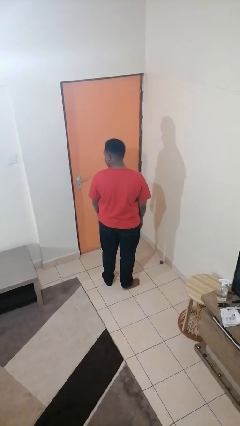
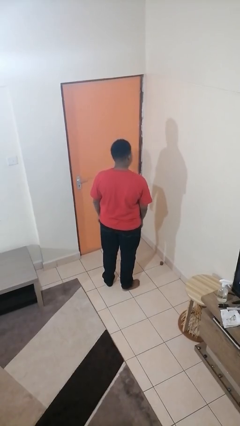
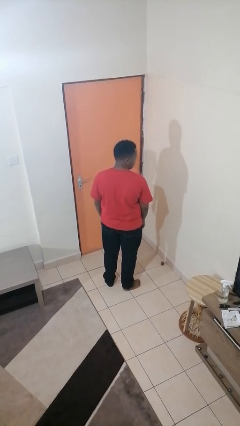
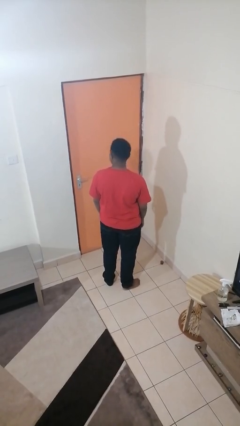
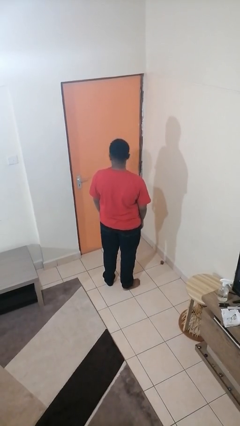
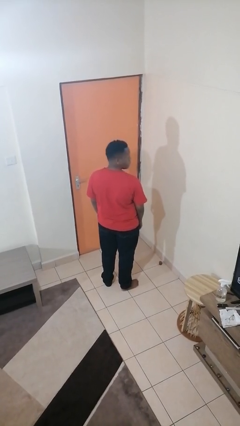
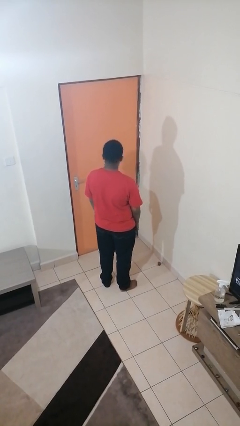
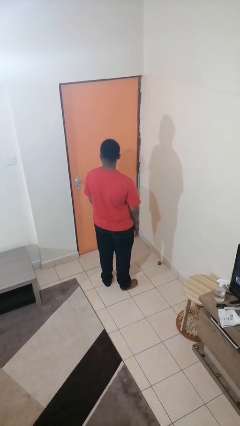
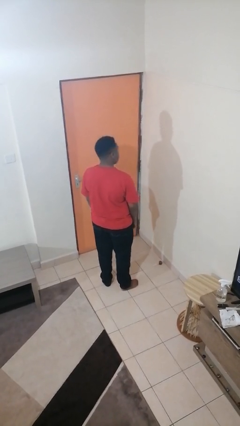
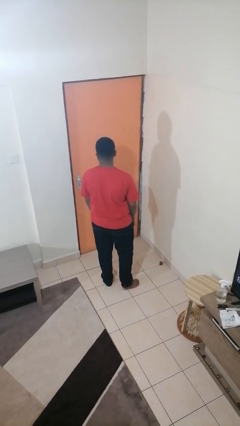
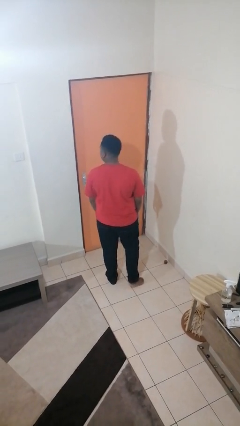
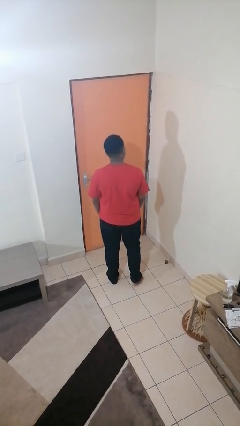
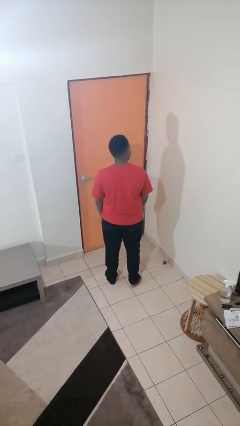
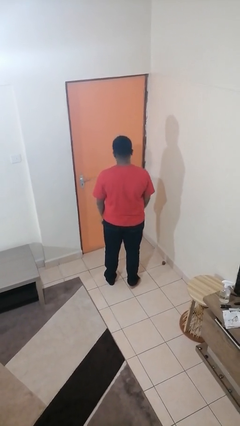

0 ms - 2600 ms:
person shakes head

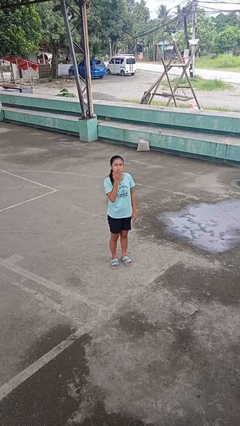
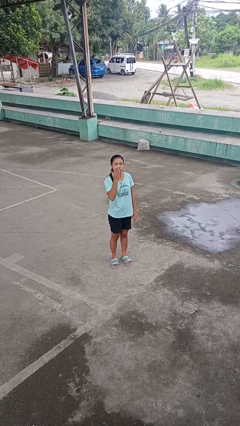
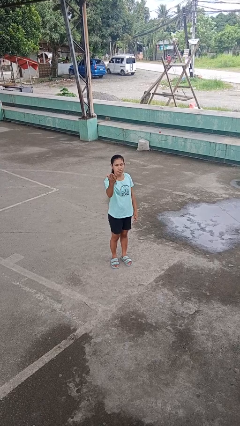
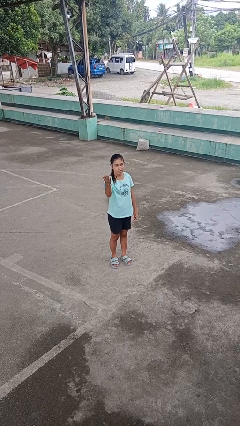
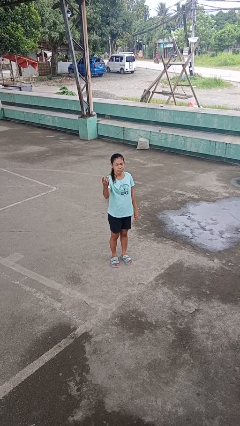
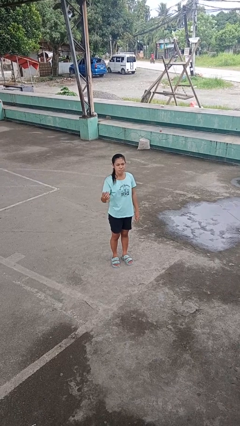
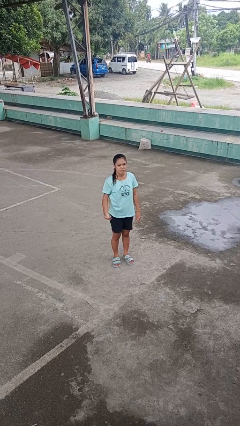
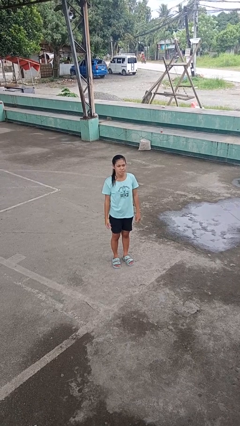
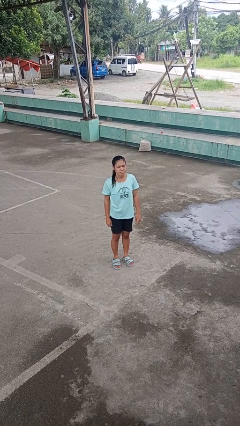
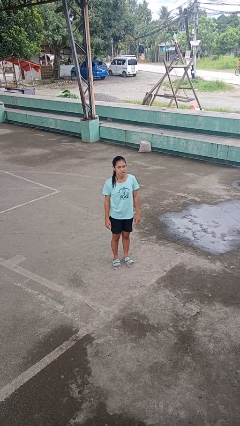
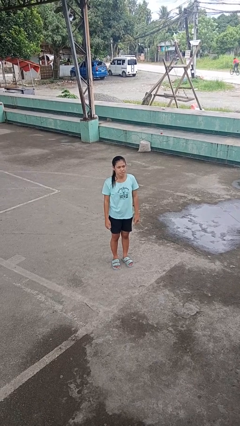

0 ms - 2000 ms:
person gestures blow kiss

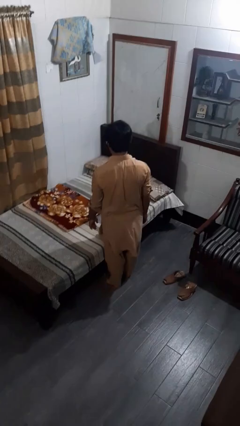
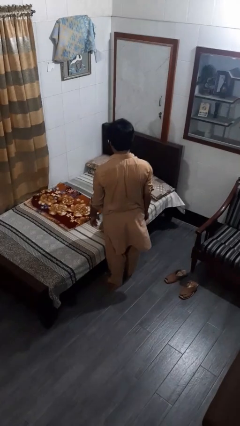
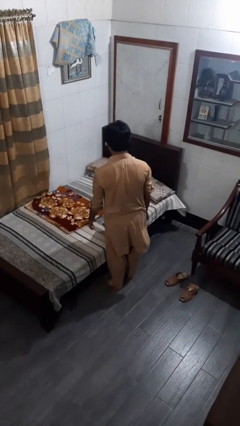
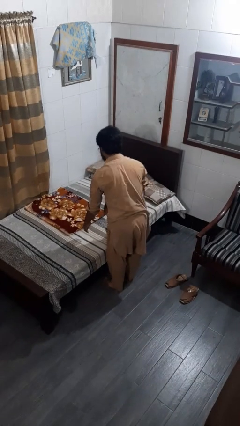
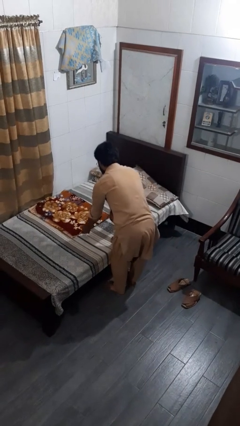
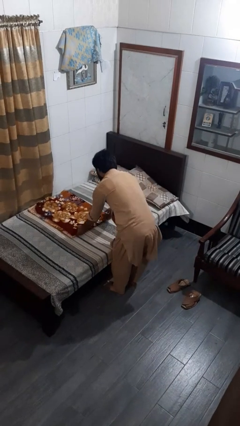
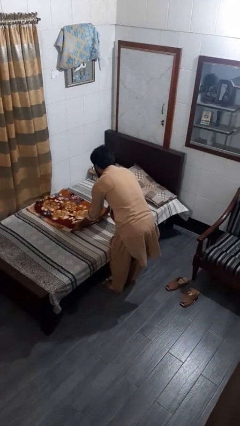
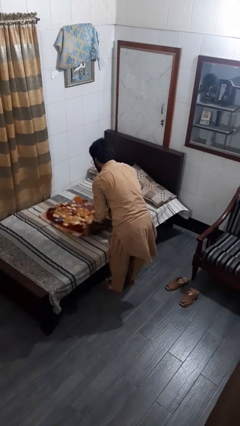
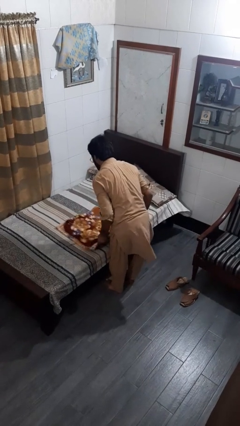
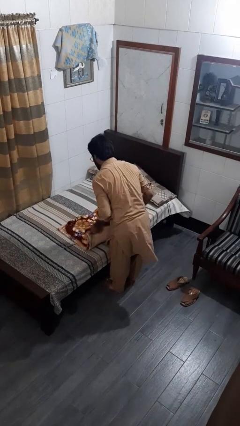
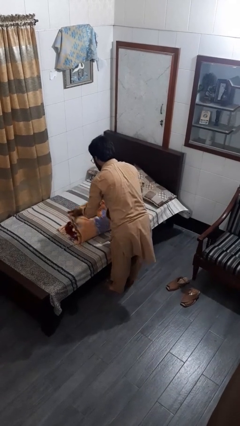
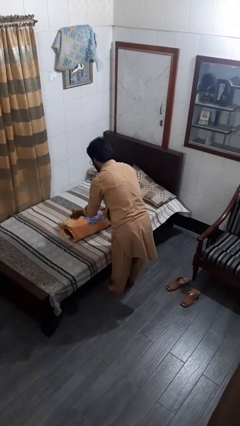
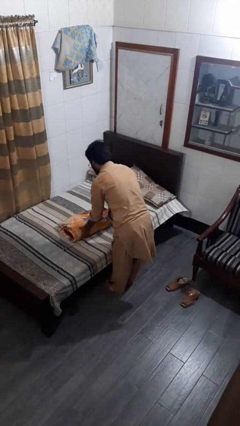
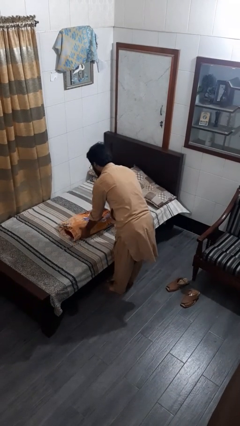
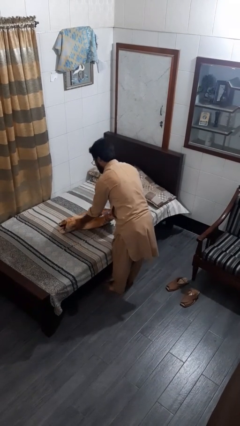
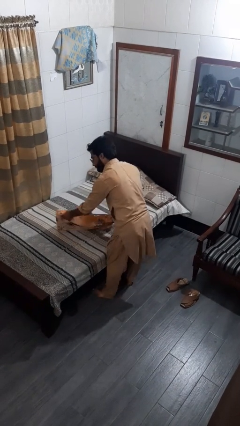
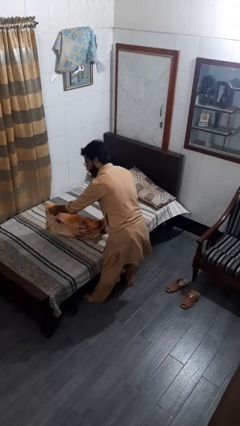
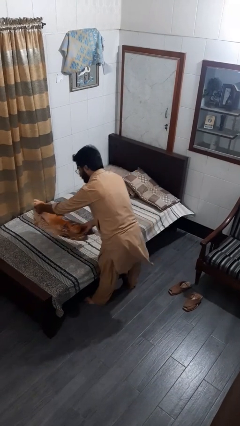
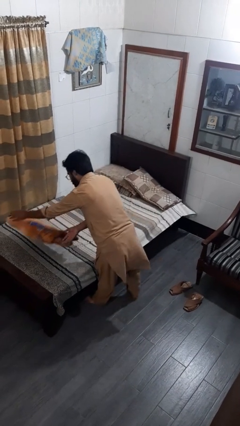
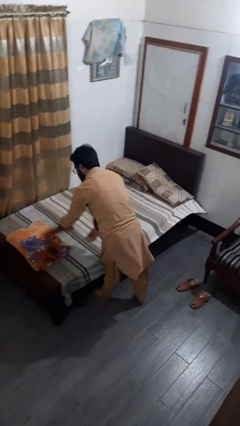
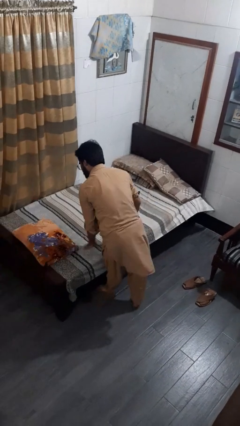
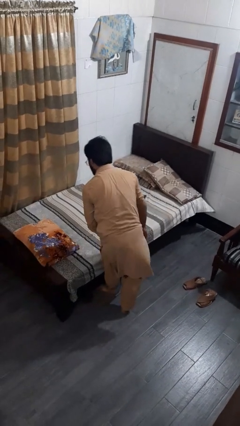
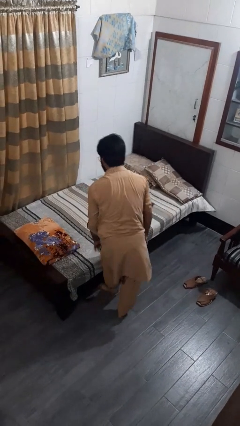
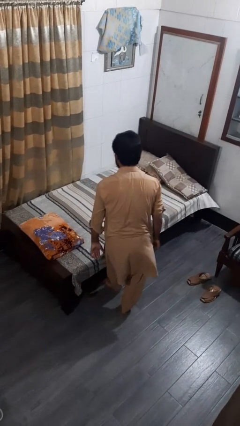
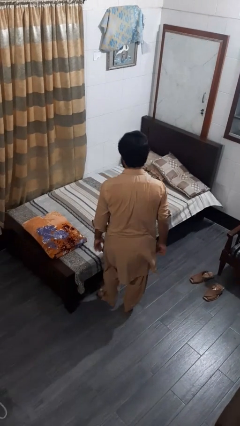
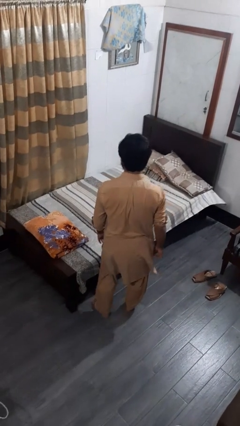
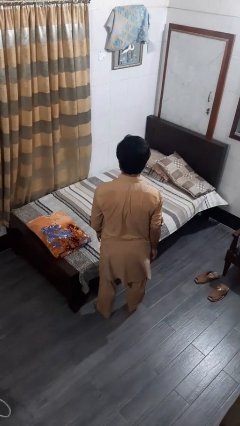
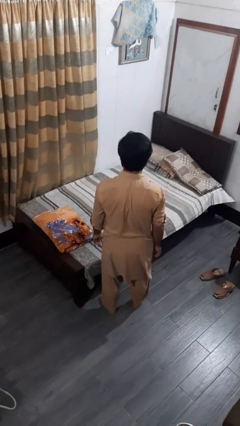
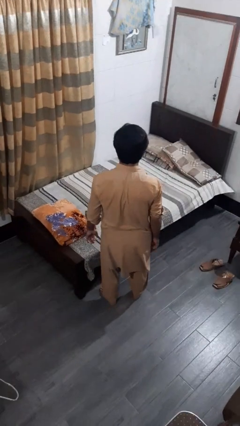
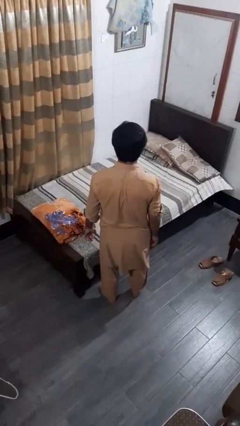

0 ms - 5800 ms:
person makes bed

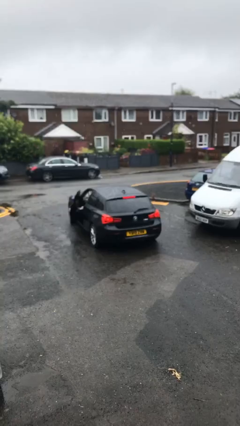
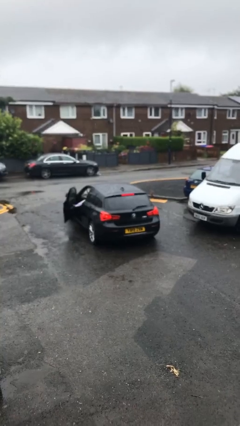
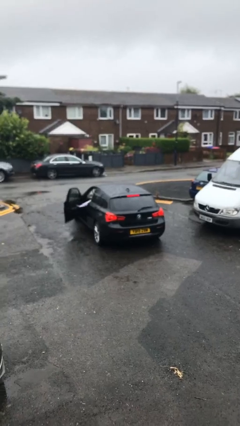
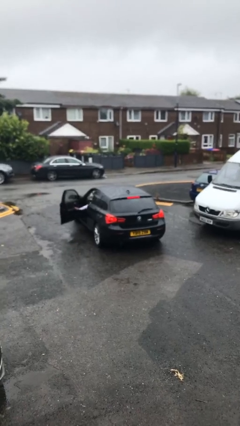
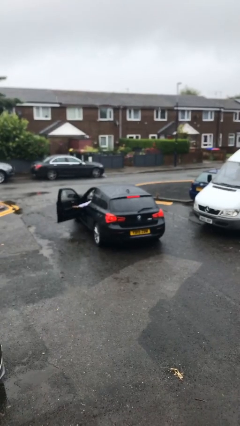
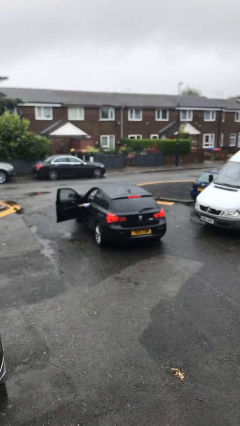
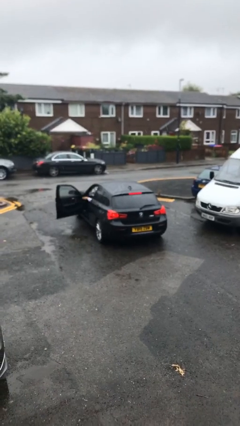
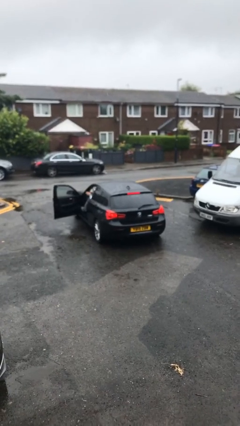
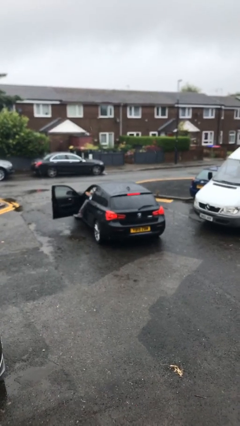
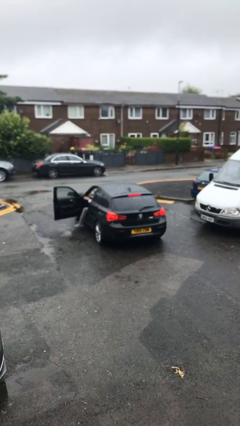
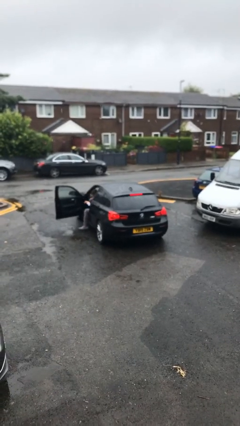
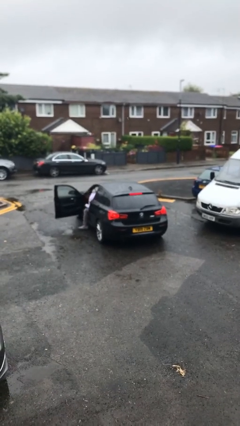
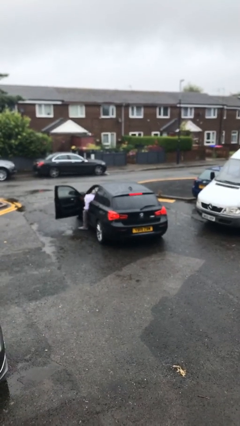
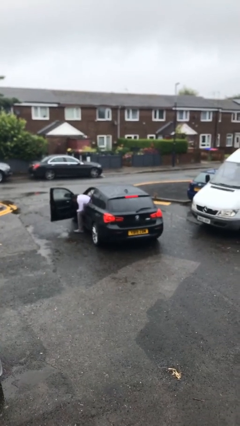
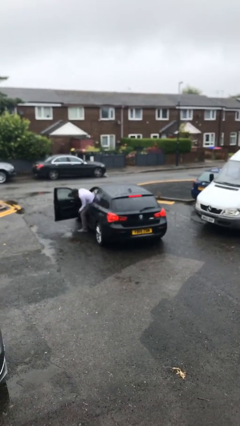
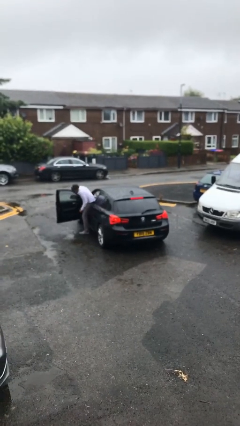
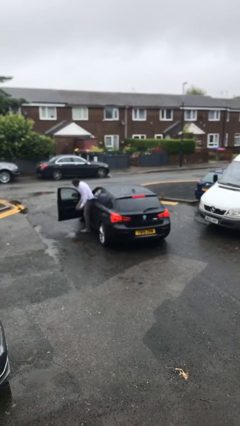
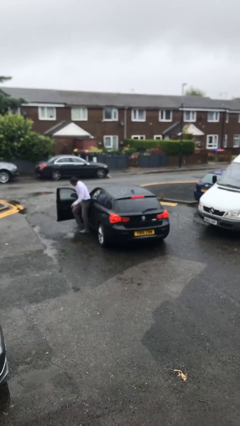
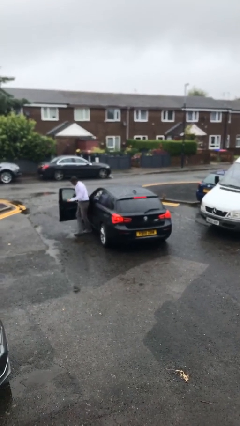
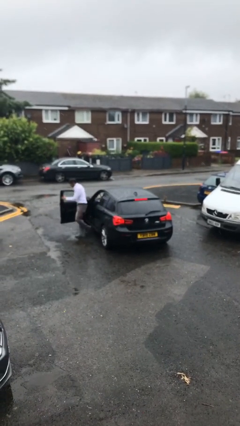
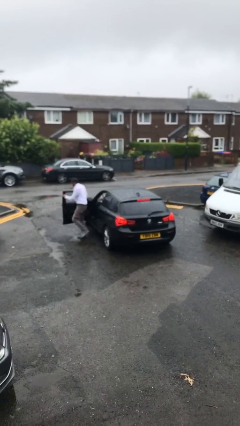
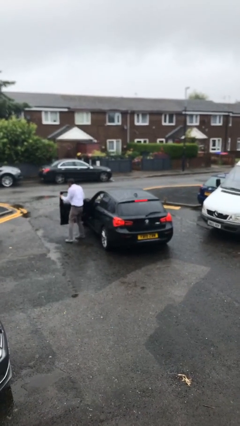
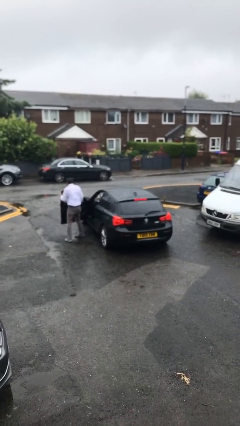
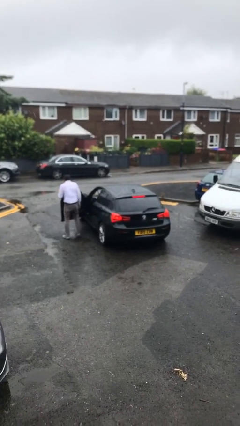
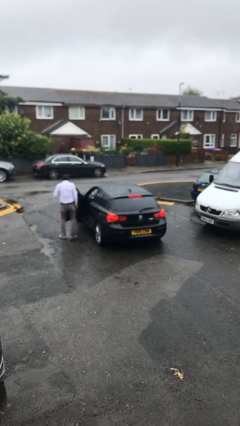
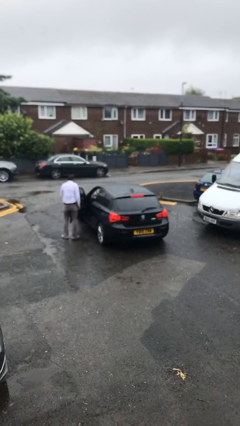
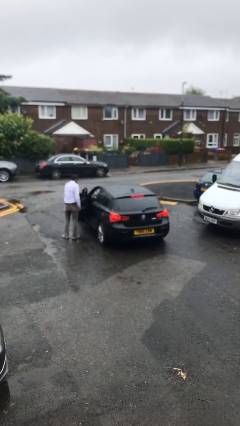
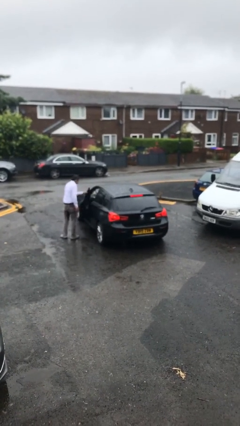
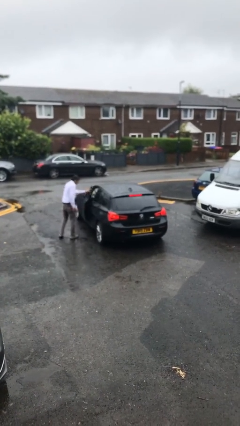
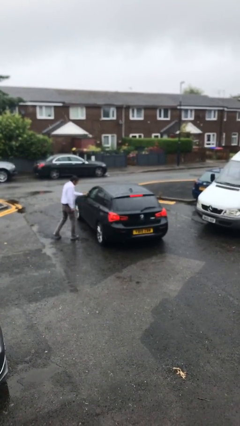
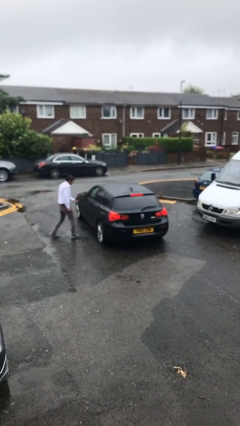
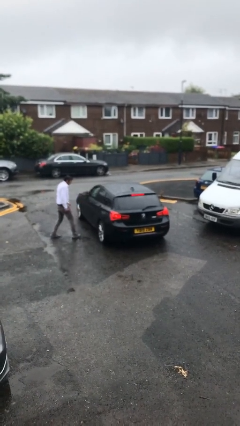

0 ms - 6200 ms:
car drops off person

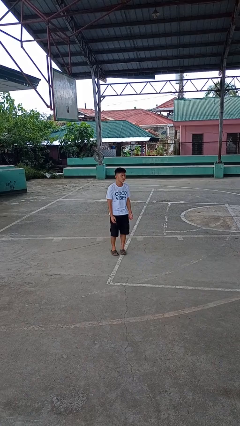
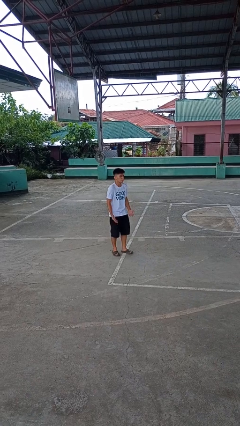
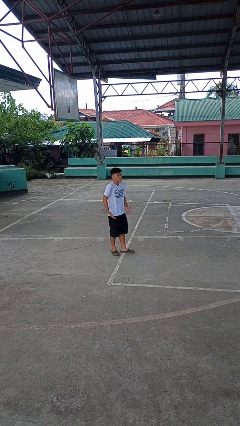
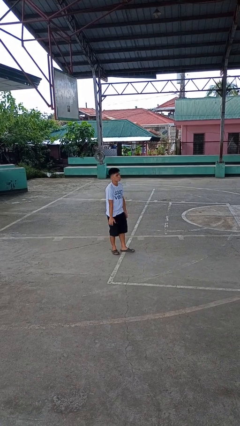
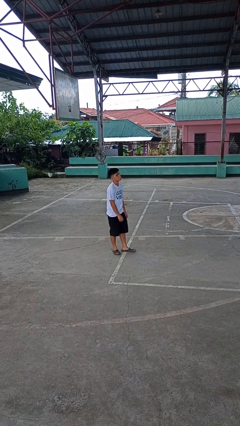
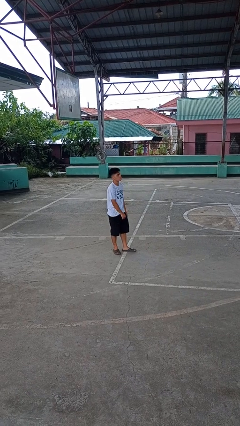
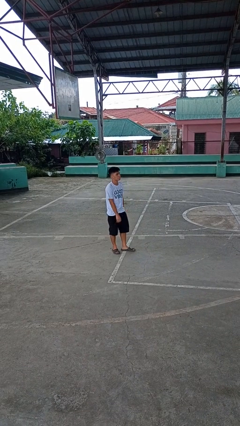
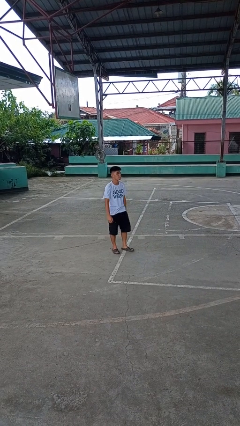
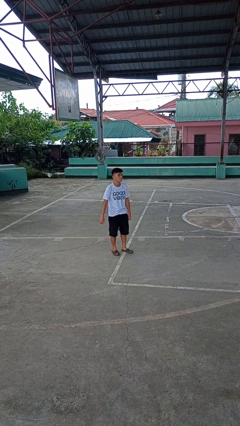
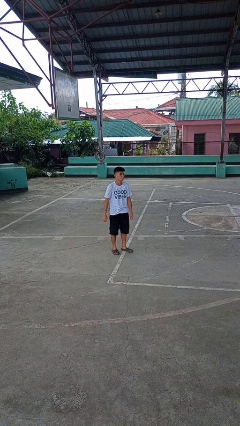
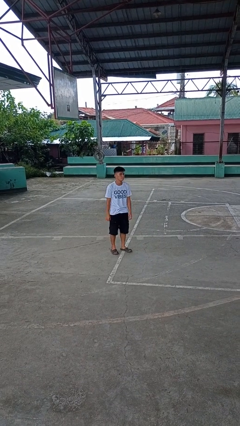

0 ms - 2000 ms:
person shrugs
